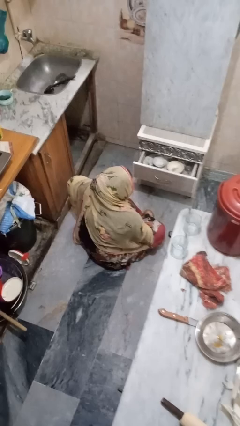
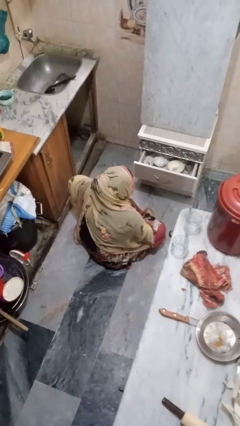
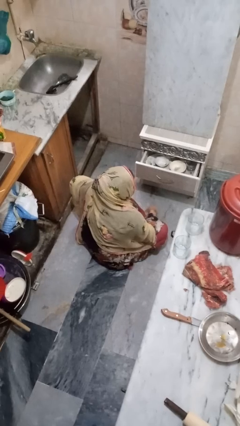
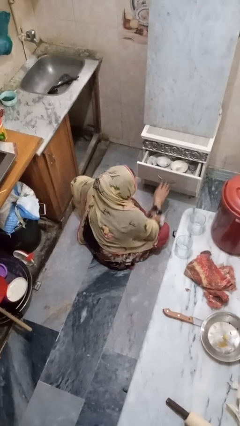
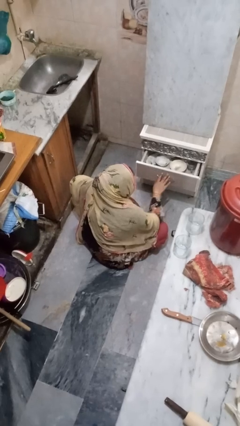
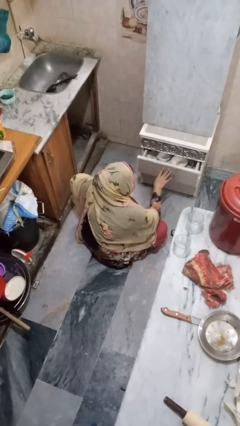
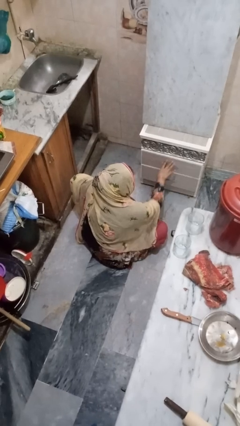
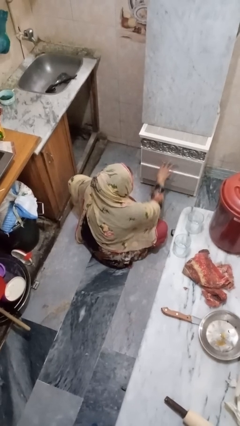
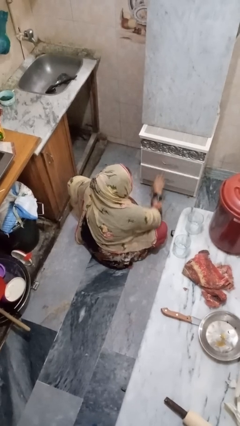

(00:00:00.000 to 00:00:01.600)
person closes kitchen drawer

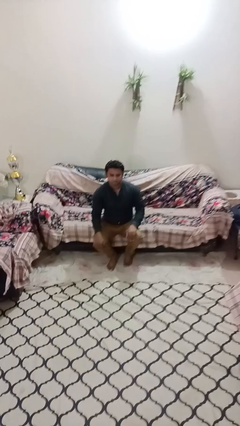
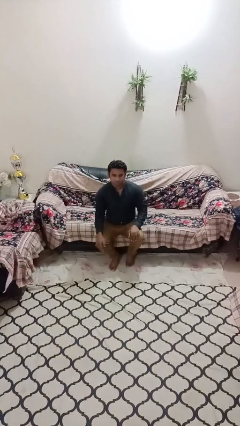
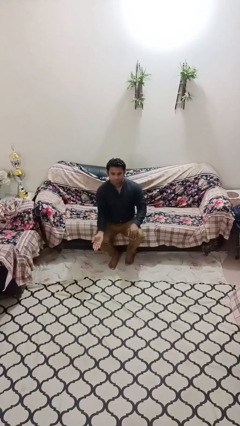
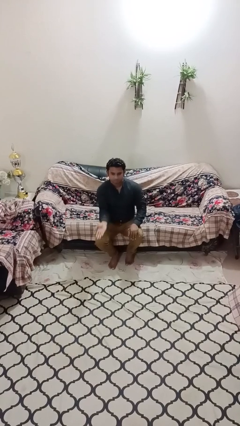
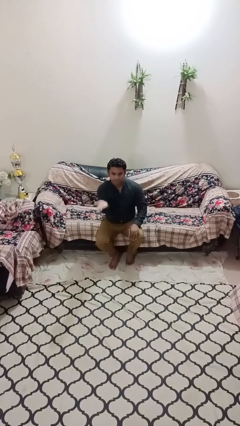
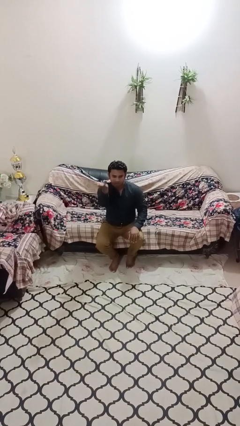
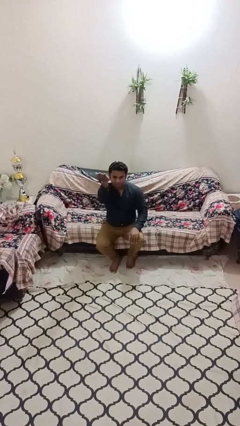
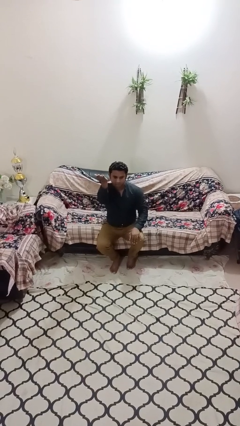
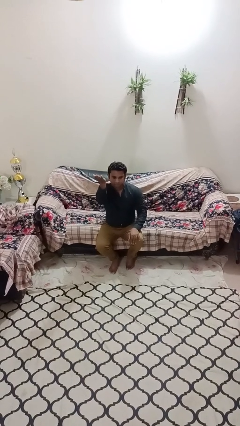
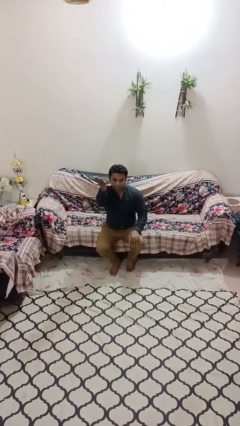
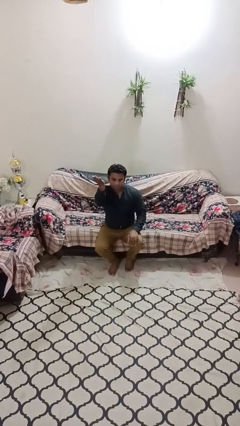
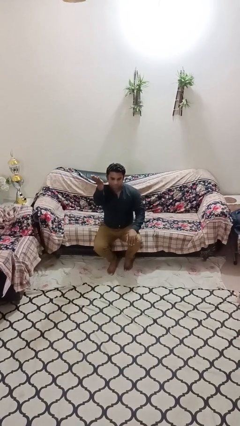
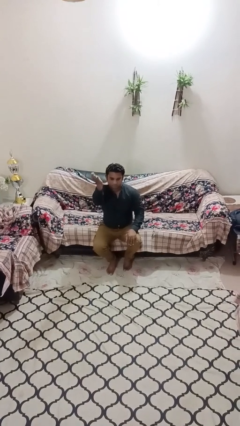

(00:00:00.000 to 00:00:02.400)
person gestures swipe up

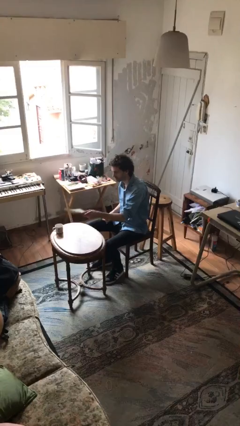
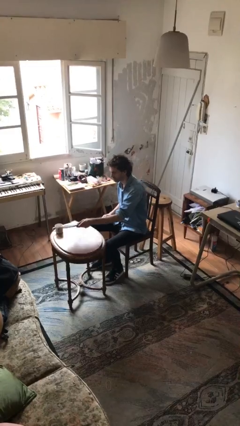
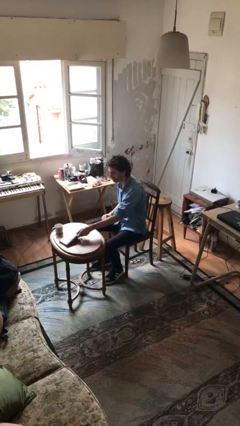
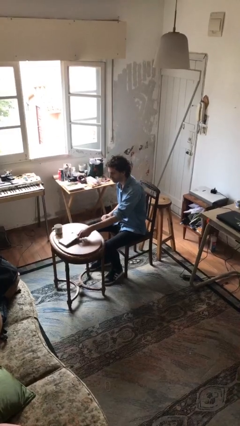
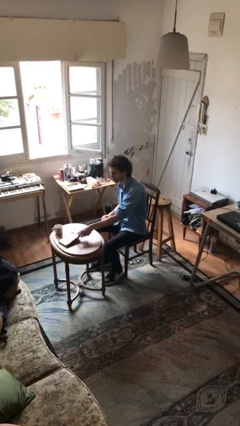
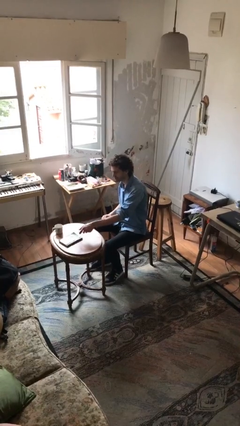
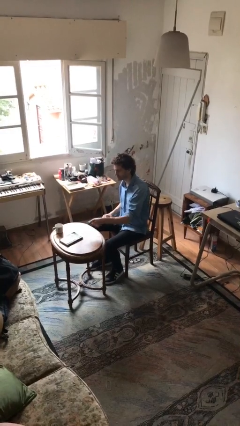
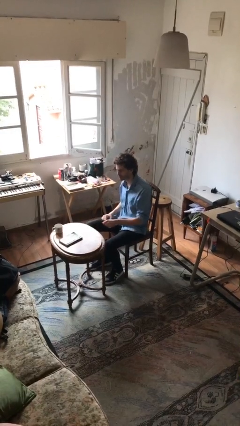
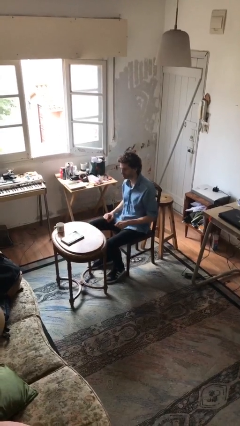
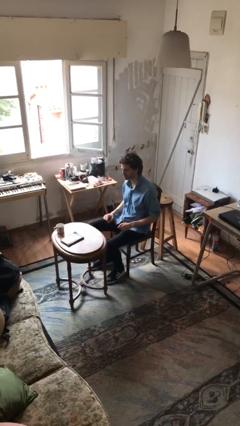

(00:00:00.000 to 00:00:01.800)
person puts down object on table

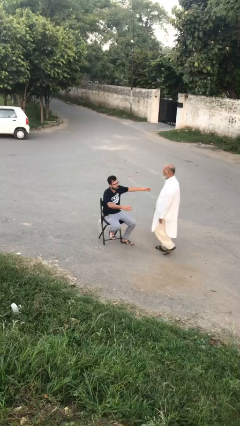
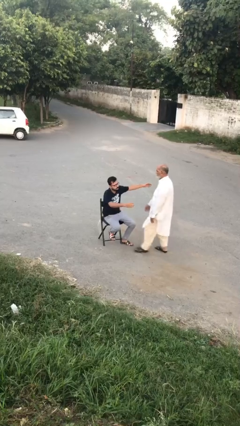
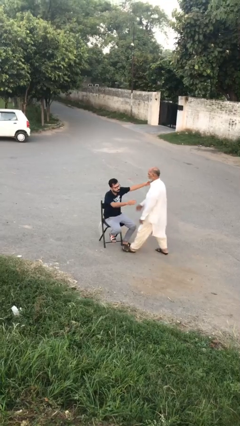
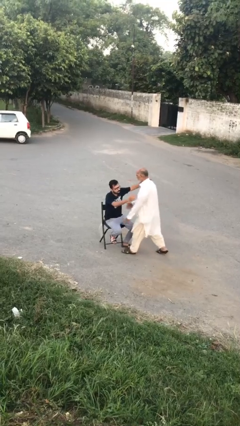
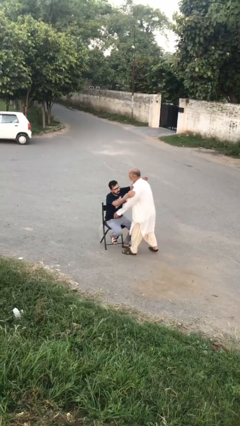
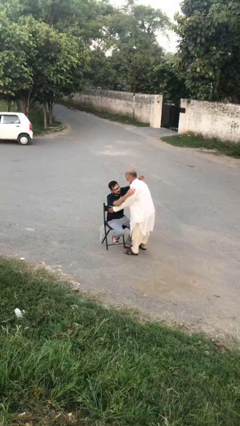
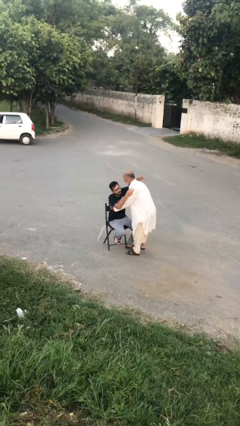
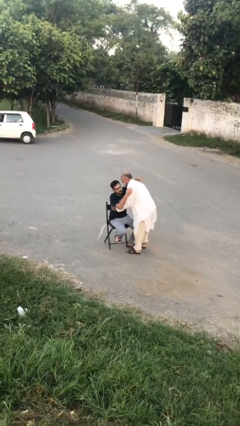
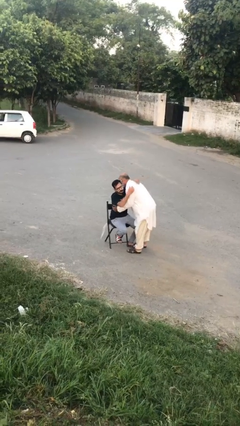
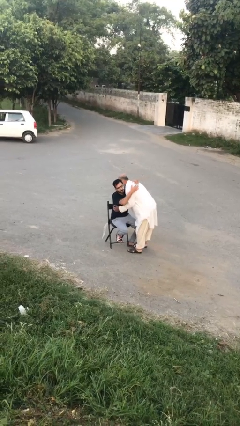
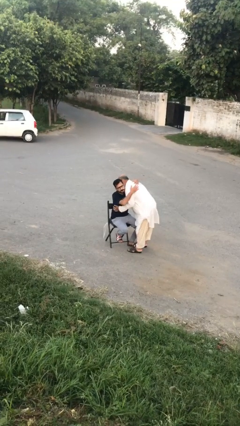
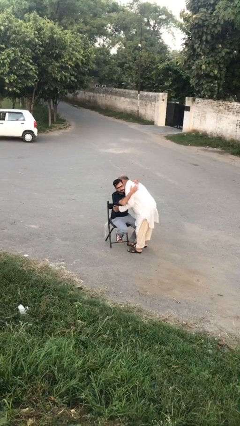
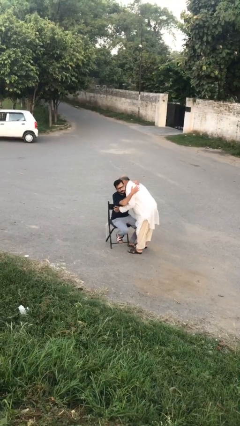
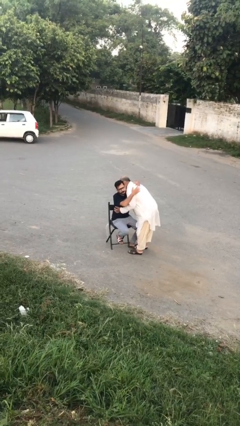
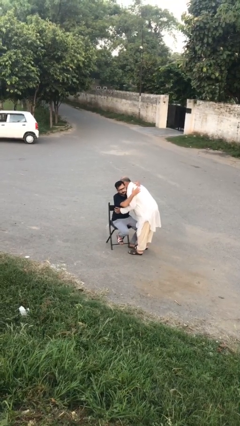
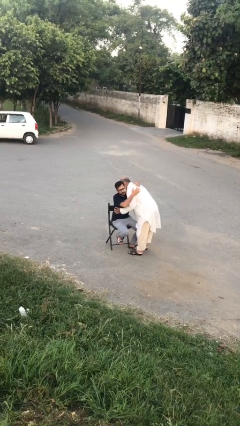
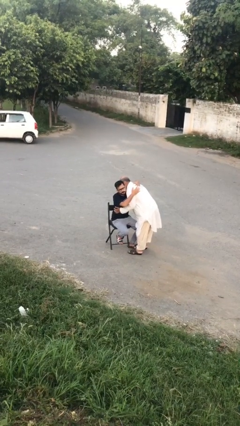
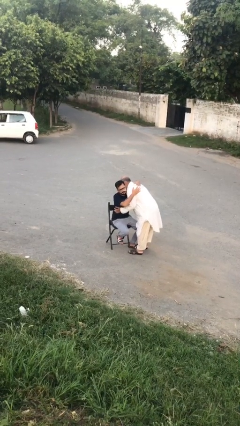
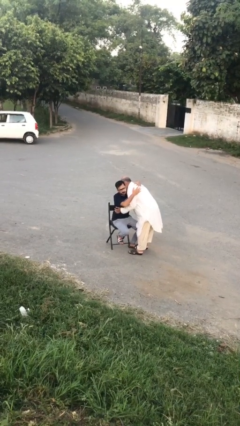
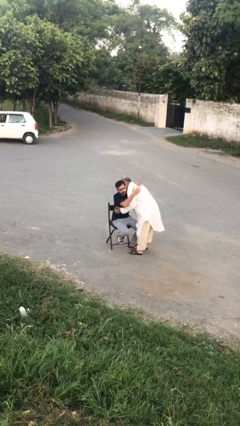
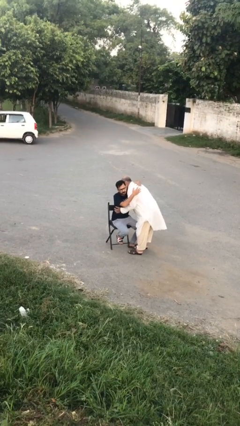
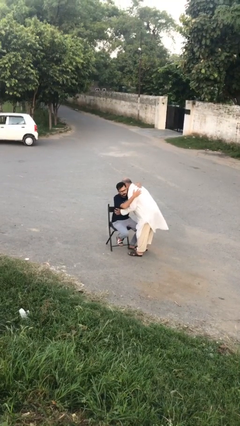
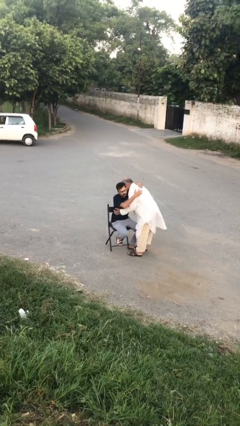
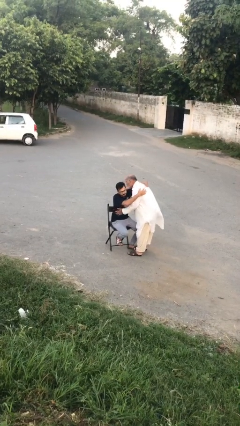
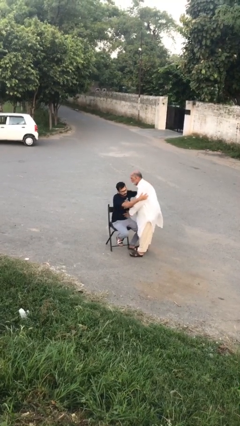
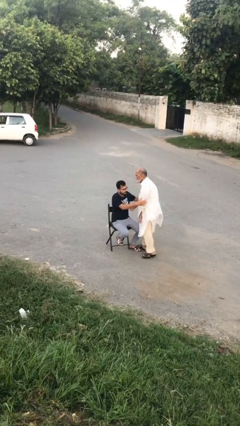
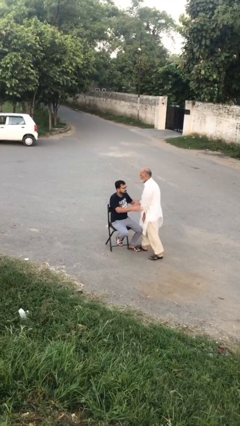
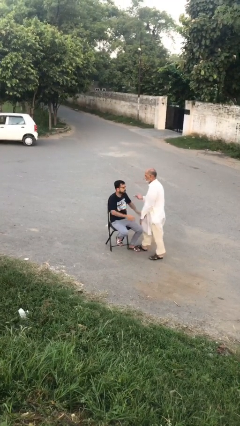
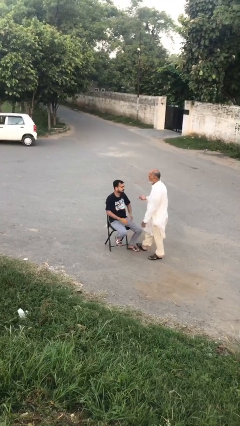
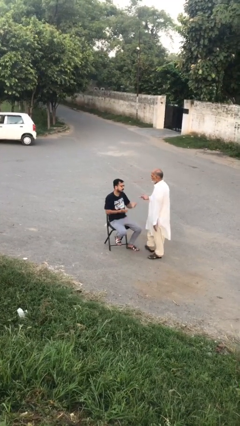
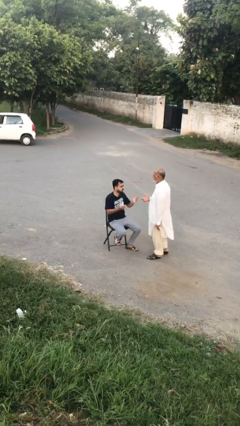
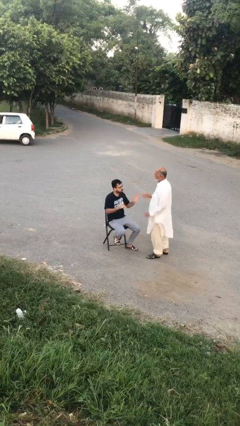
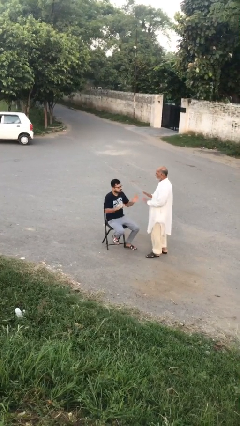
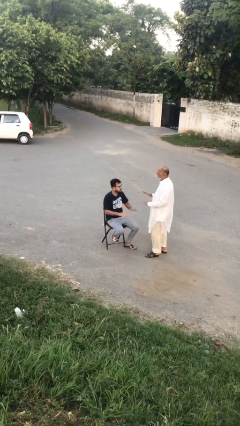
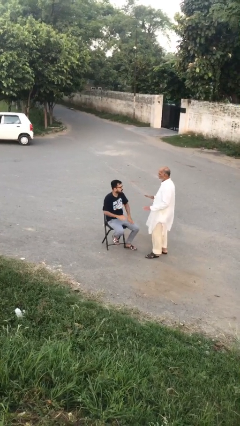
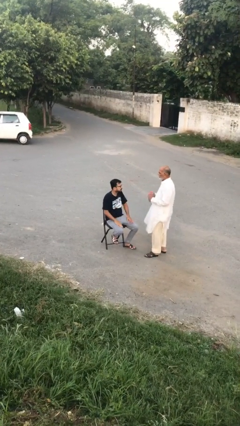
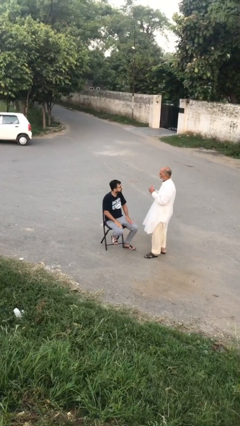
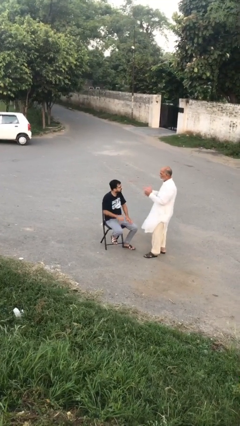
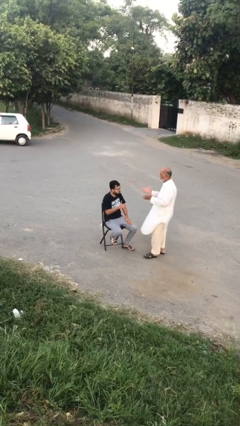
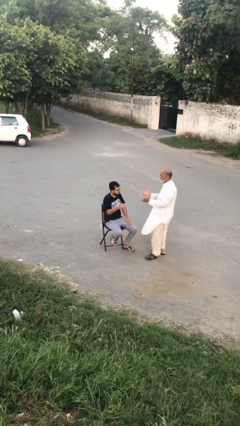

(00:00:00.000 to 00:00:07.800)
person embraces person

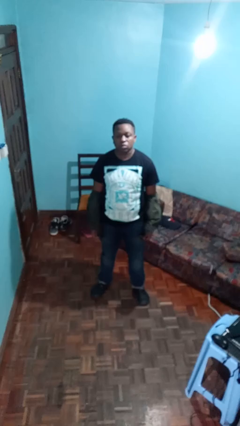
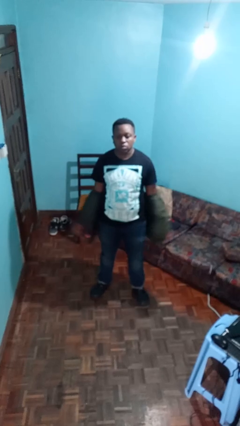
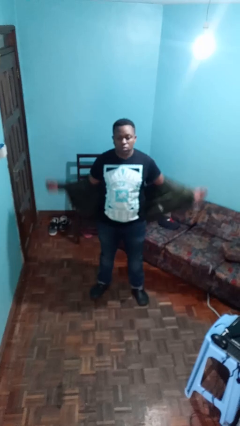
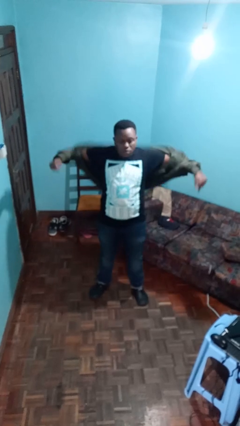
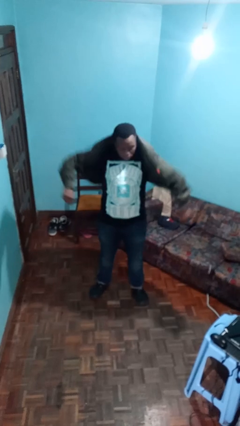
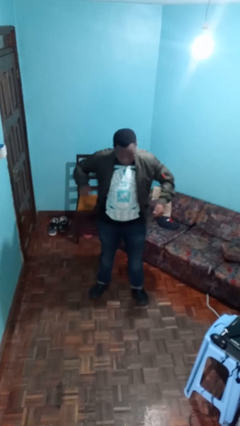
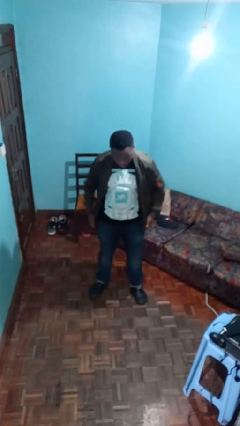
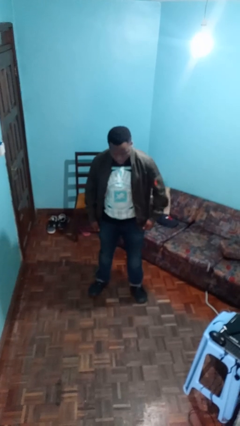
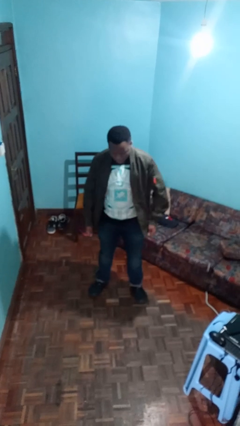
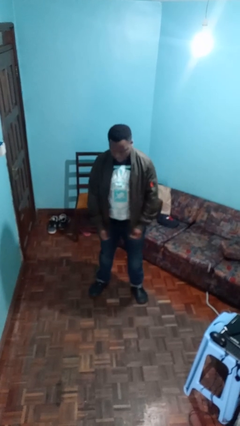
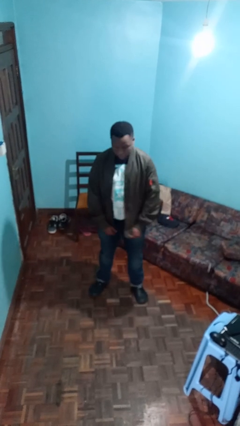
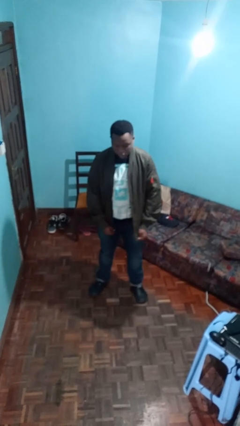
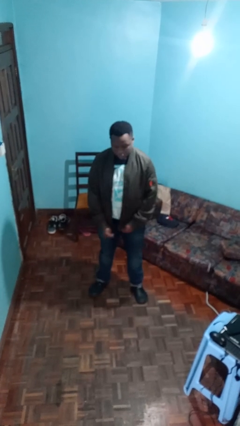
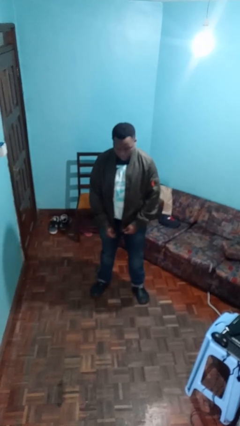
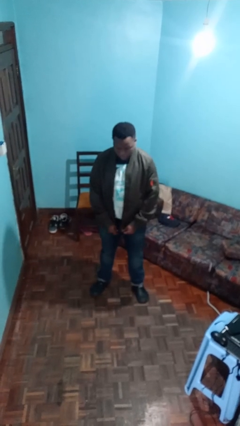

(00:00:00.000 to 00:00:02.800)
person puts on jacket

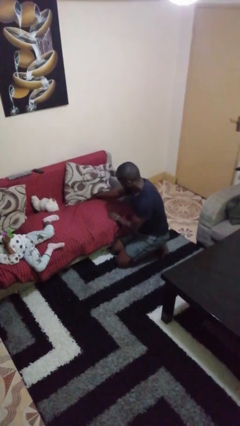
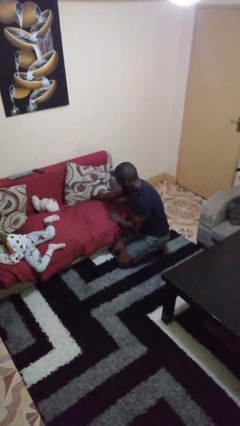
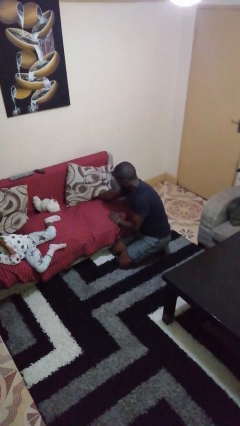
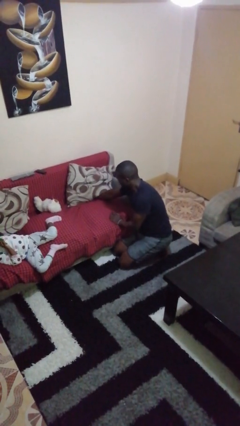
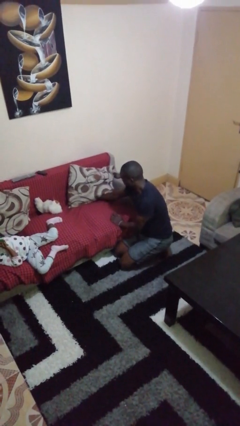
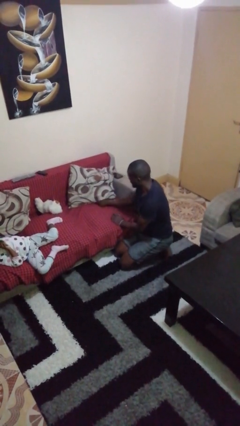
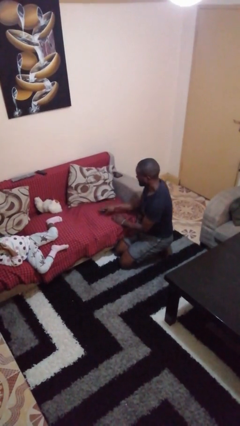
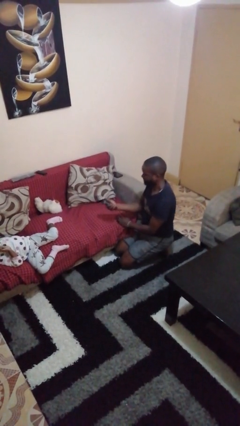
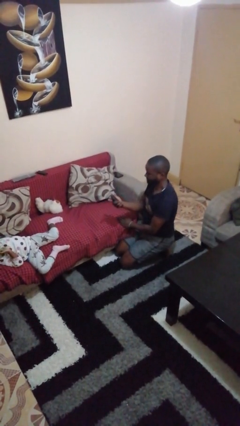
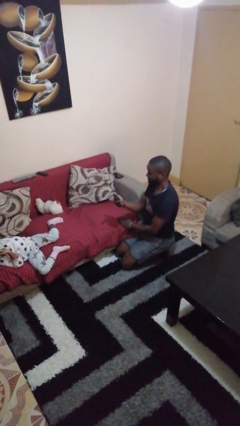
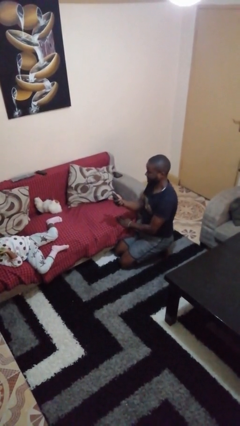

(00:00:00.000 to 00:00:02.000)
person searches in couch
